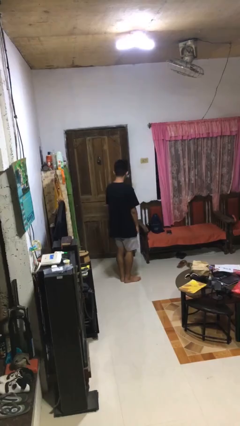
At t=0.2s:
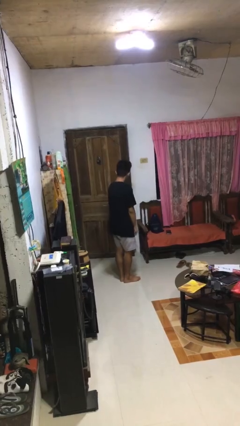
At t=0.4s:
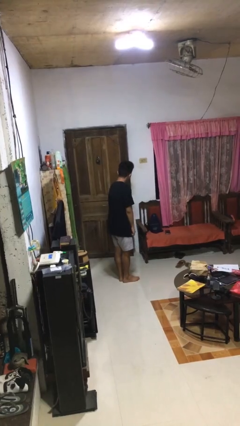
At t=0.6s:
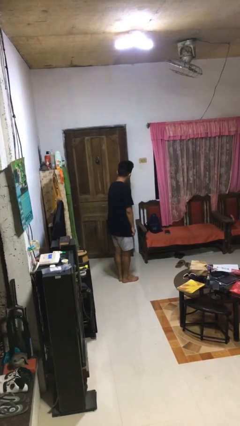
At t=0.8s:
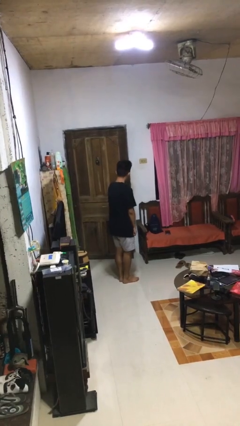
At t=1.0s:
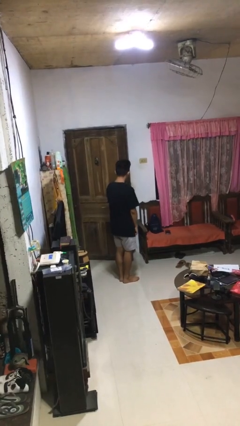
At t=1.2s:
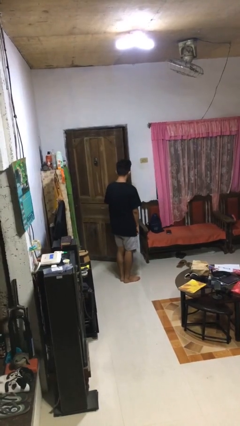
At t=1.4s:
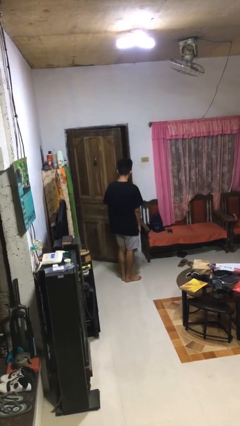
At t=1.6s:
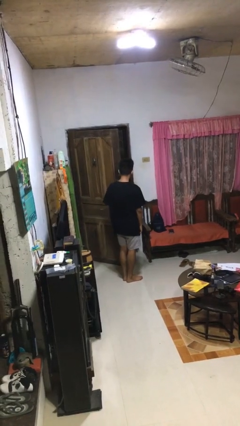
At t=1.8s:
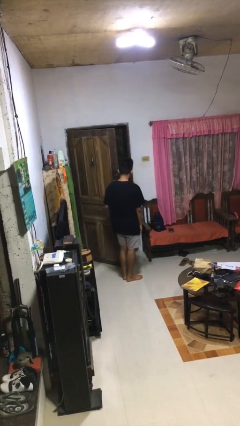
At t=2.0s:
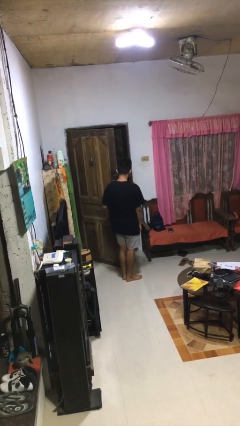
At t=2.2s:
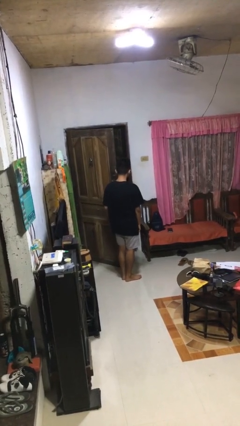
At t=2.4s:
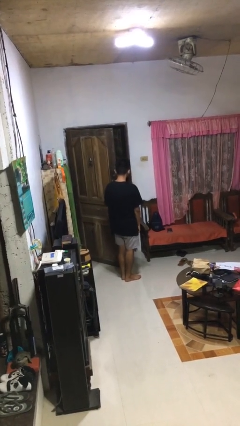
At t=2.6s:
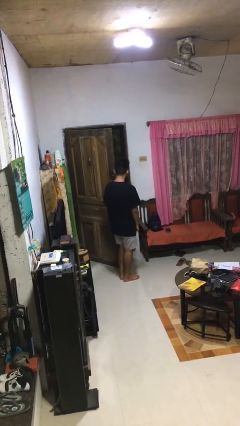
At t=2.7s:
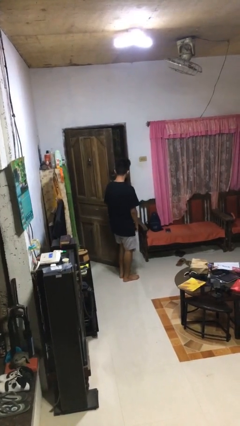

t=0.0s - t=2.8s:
person opens facility door

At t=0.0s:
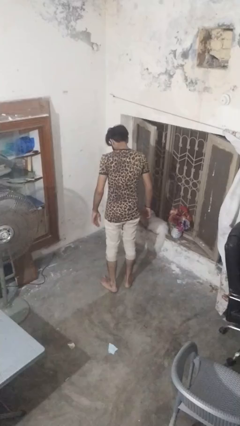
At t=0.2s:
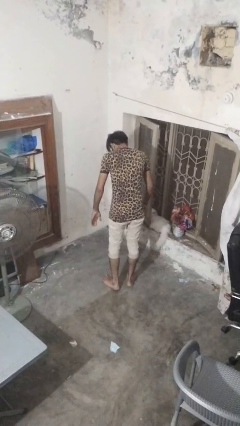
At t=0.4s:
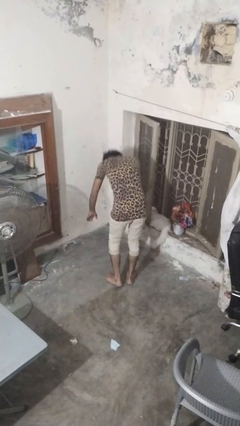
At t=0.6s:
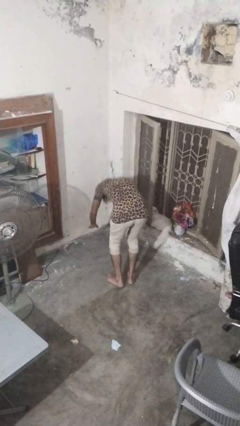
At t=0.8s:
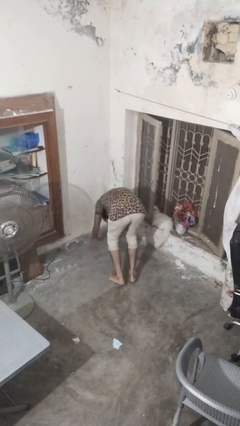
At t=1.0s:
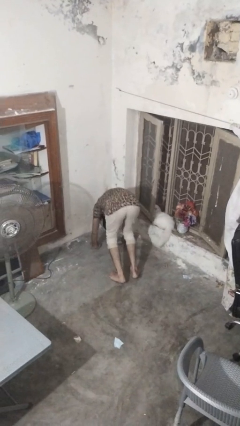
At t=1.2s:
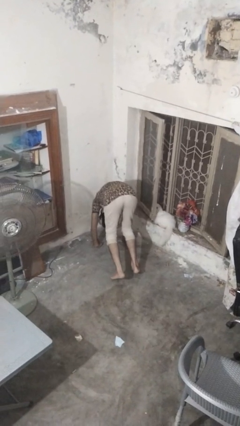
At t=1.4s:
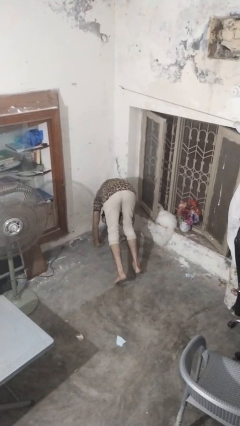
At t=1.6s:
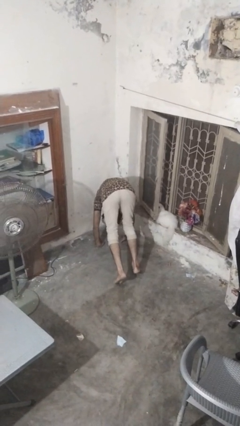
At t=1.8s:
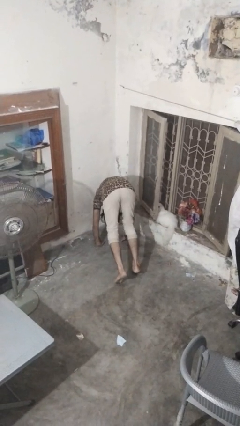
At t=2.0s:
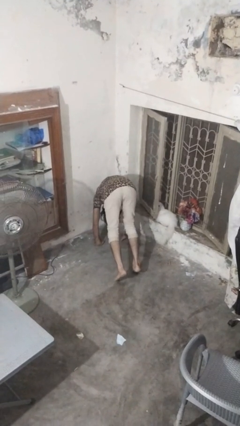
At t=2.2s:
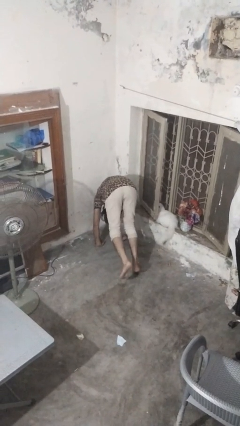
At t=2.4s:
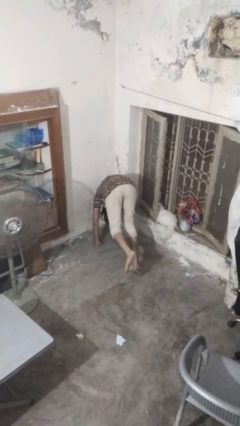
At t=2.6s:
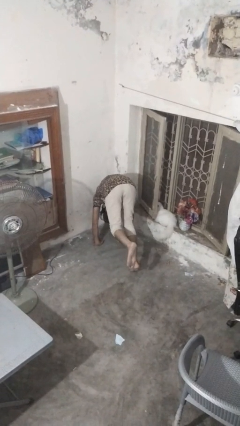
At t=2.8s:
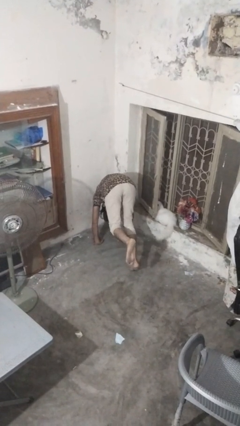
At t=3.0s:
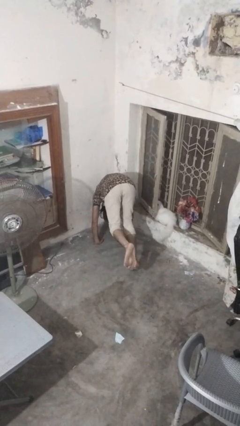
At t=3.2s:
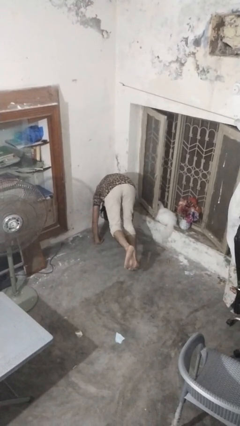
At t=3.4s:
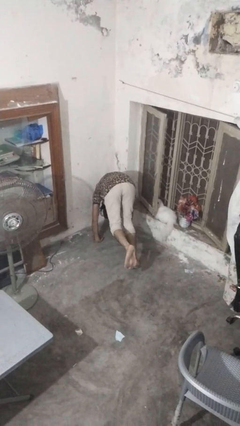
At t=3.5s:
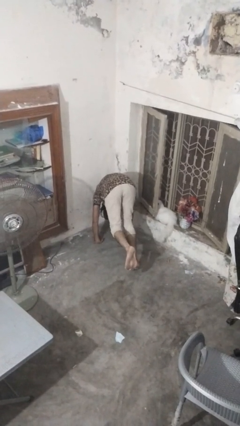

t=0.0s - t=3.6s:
person handstand

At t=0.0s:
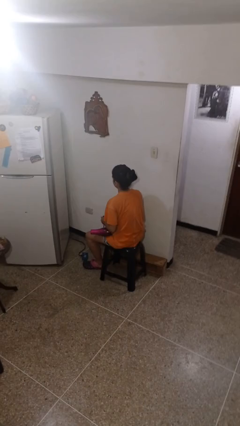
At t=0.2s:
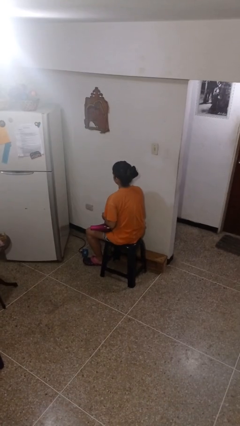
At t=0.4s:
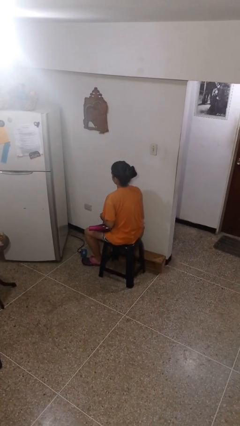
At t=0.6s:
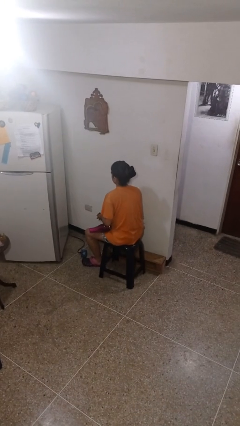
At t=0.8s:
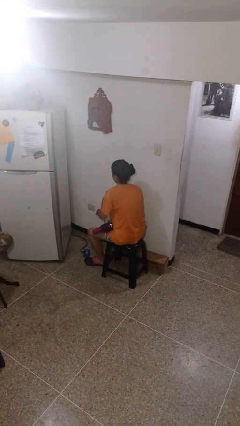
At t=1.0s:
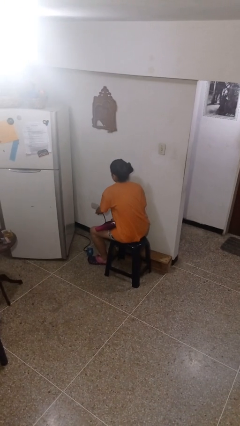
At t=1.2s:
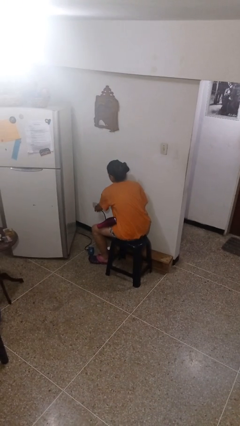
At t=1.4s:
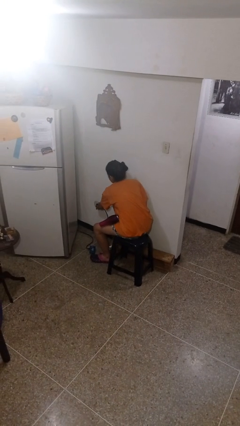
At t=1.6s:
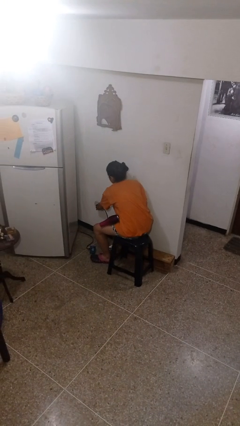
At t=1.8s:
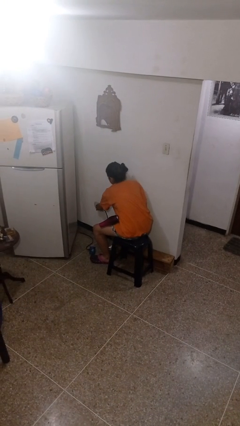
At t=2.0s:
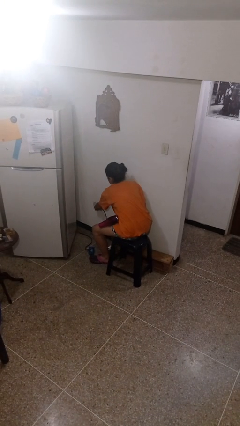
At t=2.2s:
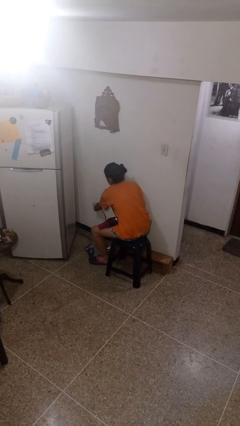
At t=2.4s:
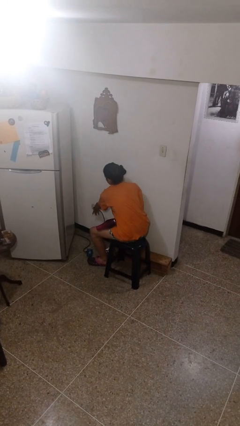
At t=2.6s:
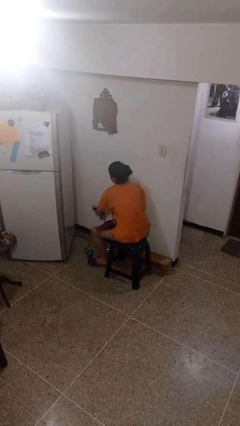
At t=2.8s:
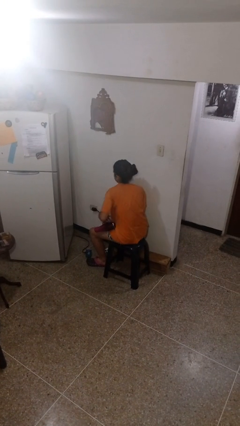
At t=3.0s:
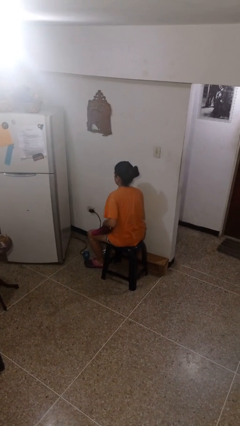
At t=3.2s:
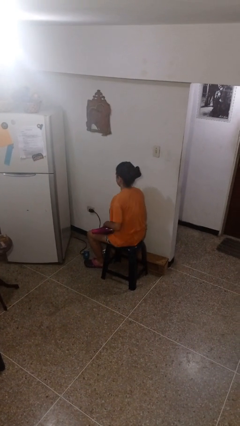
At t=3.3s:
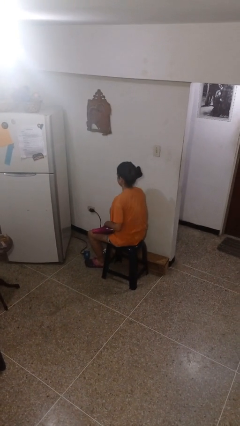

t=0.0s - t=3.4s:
person plugs into electrical socket

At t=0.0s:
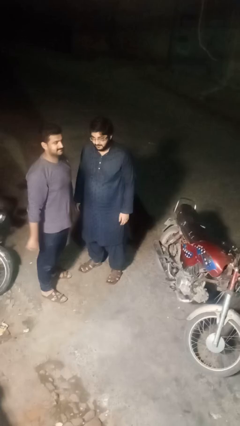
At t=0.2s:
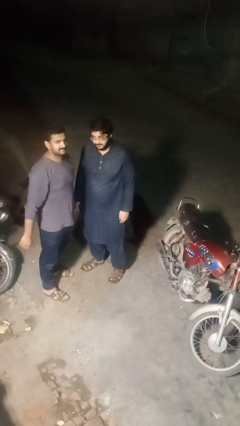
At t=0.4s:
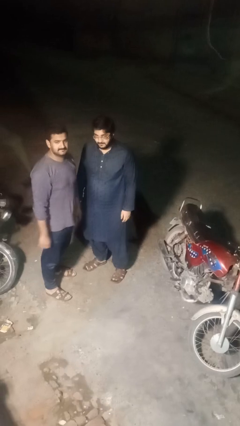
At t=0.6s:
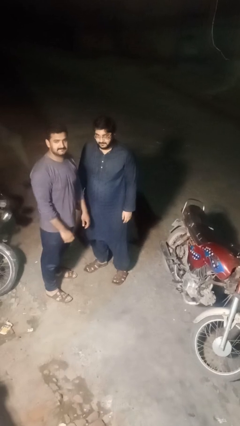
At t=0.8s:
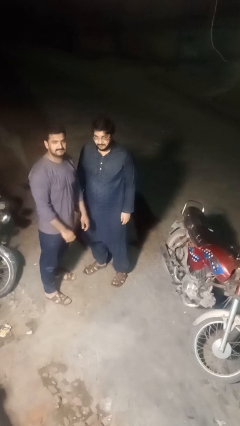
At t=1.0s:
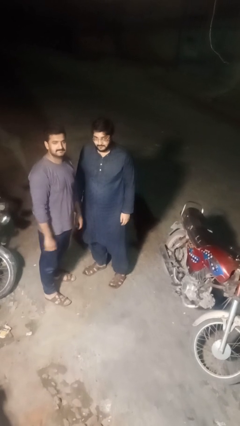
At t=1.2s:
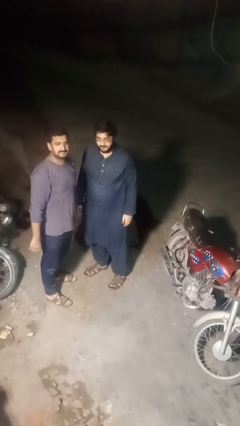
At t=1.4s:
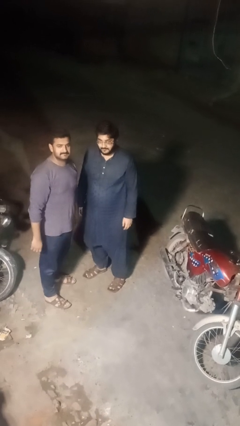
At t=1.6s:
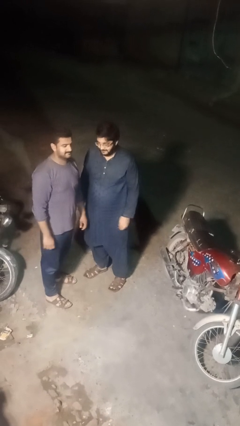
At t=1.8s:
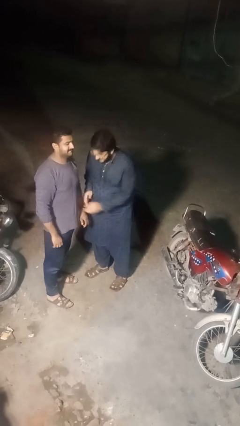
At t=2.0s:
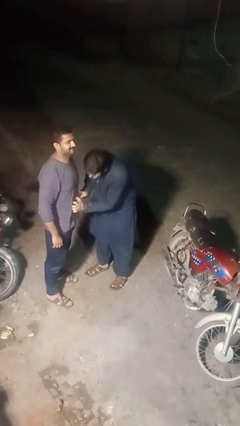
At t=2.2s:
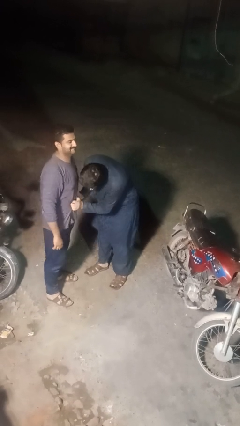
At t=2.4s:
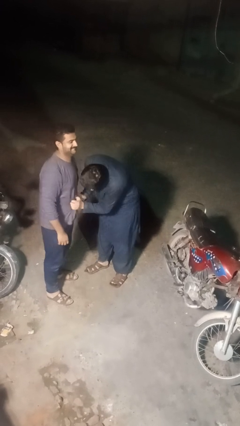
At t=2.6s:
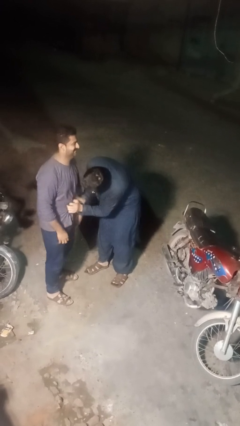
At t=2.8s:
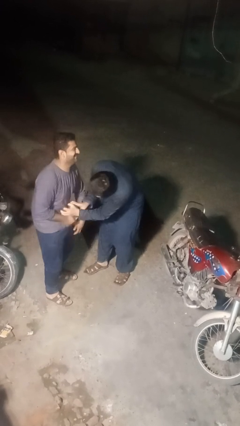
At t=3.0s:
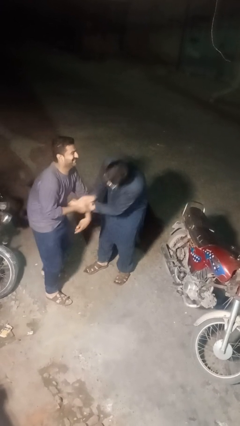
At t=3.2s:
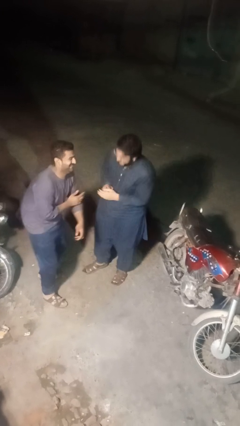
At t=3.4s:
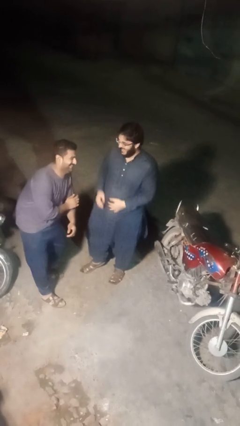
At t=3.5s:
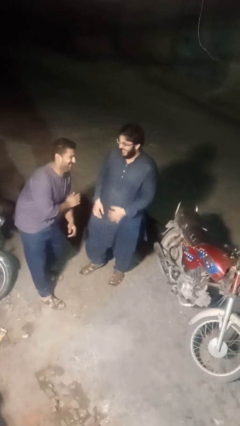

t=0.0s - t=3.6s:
person tickles person

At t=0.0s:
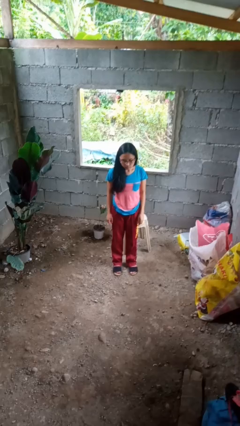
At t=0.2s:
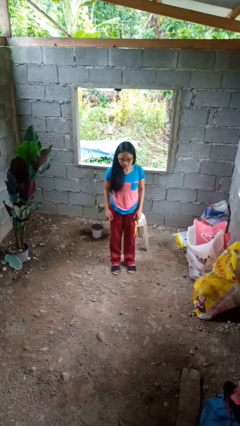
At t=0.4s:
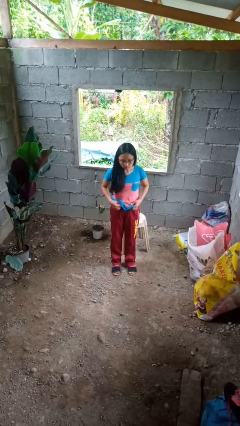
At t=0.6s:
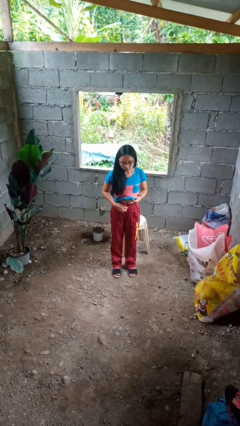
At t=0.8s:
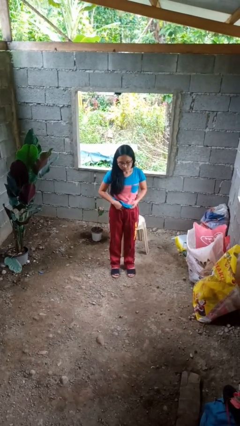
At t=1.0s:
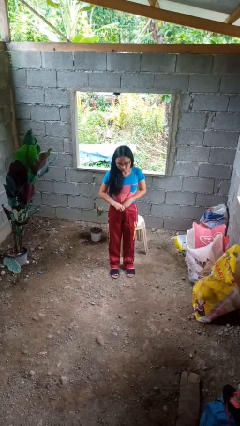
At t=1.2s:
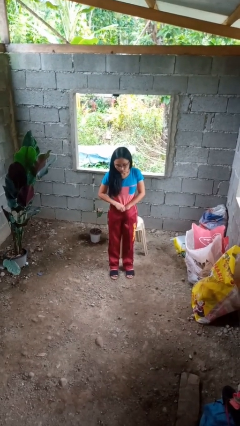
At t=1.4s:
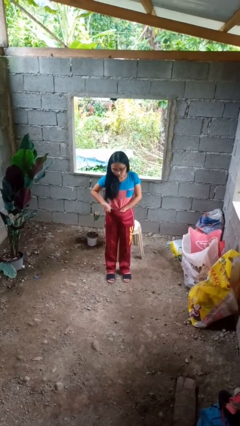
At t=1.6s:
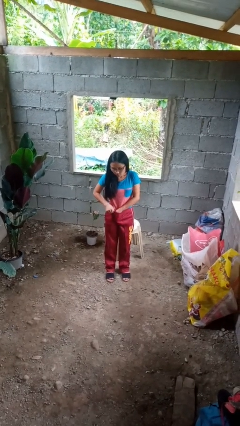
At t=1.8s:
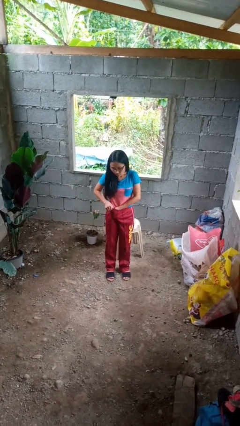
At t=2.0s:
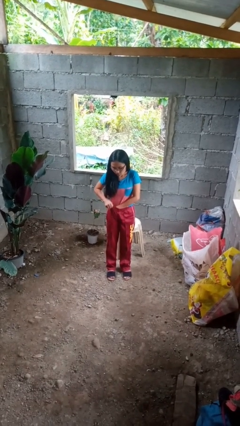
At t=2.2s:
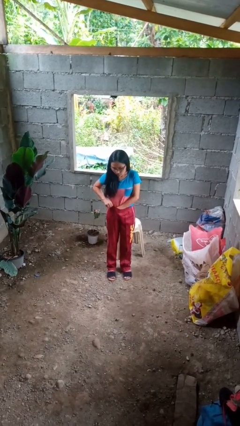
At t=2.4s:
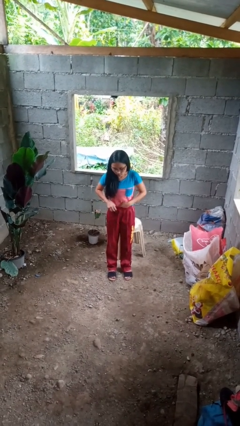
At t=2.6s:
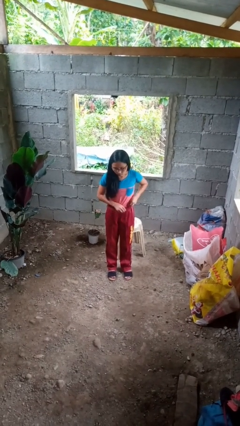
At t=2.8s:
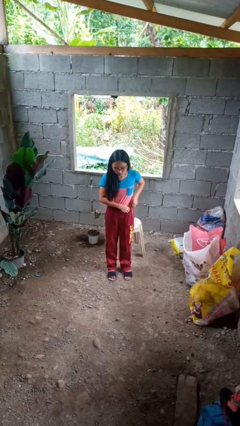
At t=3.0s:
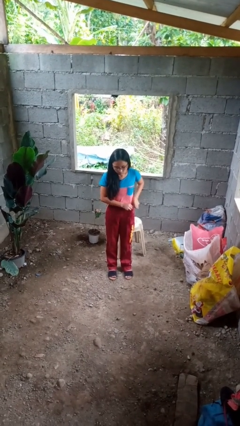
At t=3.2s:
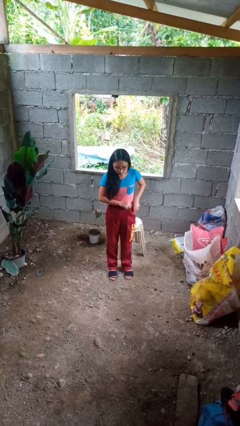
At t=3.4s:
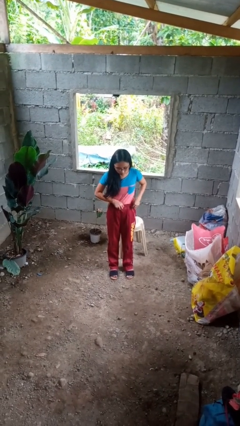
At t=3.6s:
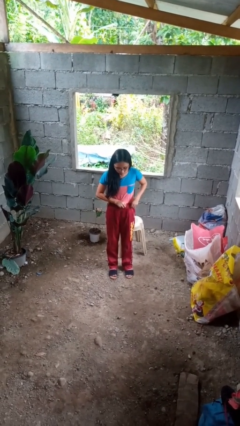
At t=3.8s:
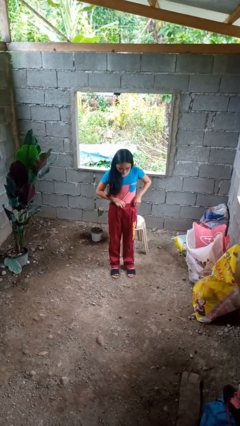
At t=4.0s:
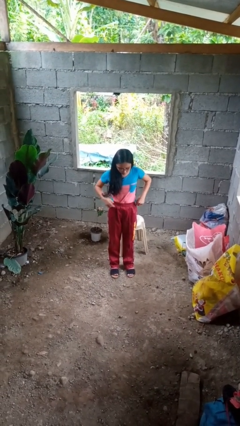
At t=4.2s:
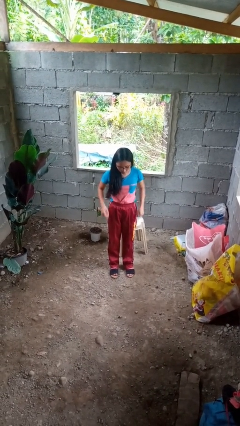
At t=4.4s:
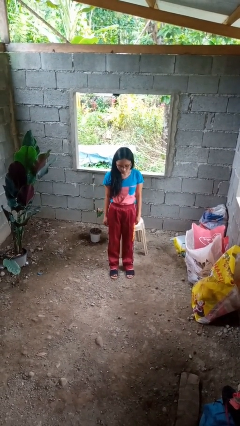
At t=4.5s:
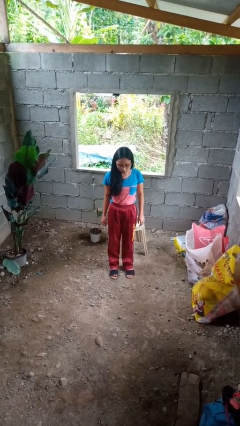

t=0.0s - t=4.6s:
person tucks in shirt
